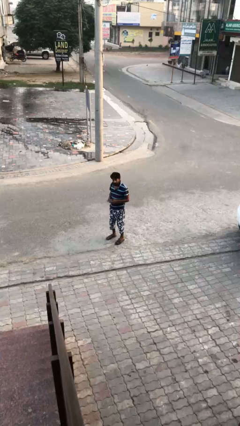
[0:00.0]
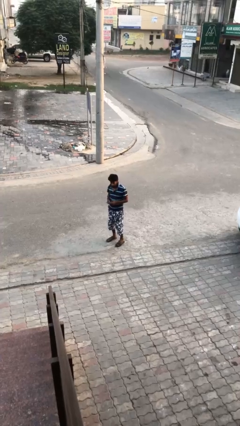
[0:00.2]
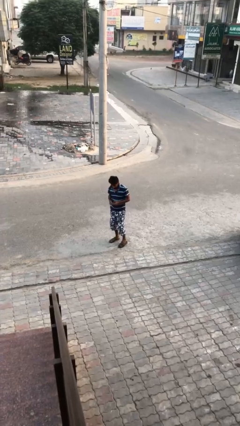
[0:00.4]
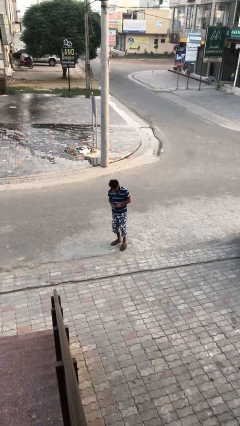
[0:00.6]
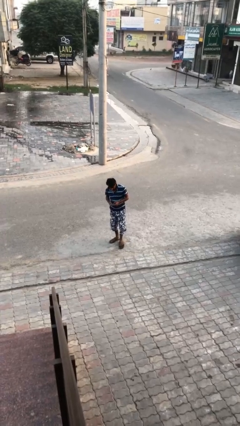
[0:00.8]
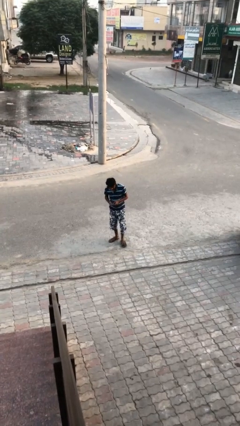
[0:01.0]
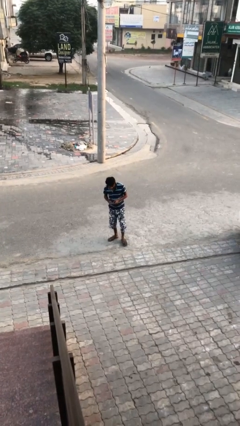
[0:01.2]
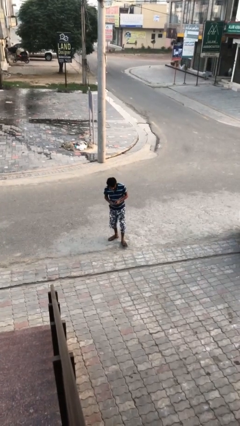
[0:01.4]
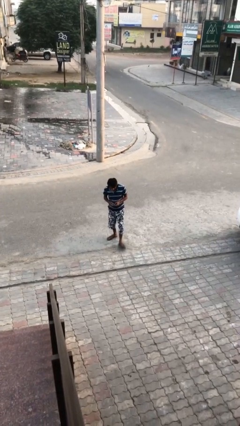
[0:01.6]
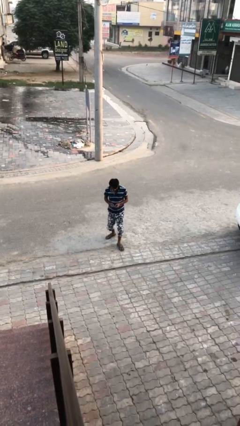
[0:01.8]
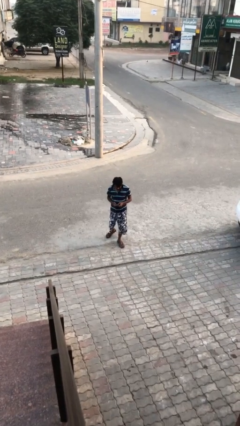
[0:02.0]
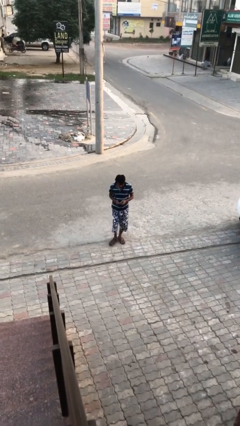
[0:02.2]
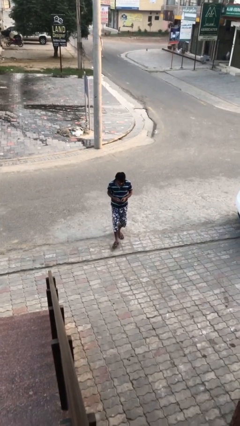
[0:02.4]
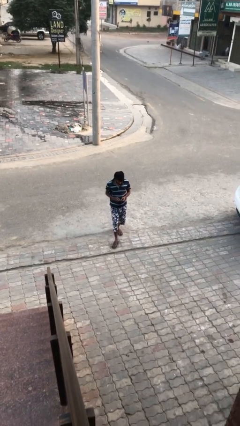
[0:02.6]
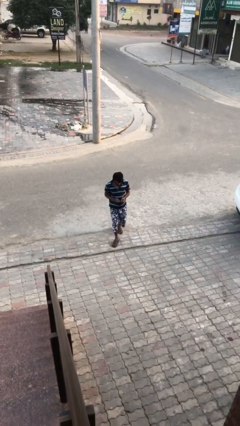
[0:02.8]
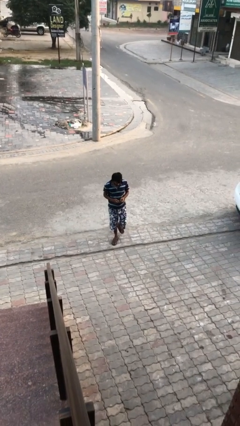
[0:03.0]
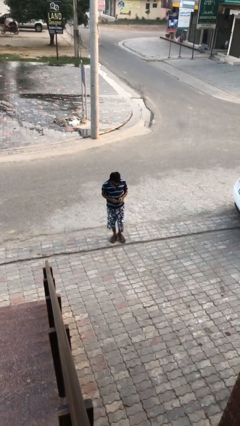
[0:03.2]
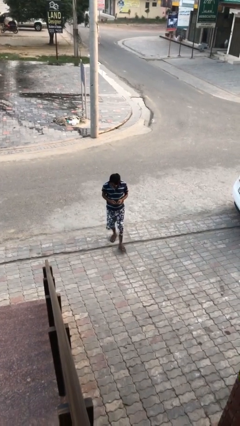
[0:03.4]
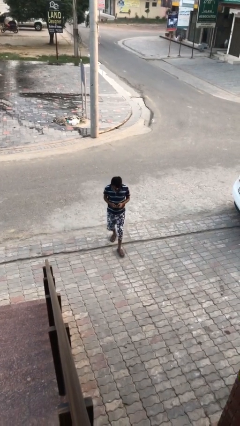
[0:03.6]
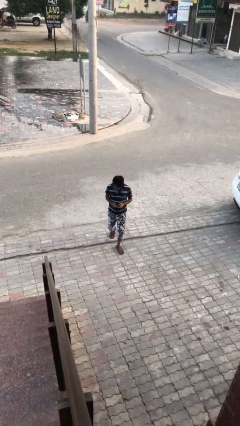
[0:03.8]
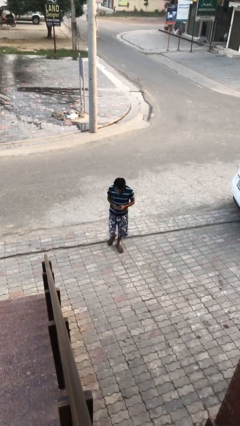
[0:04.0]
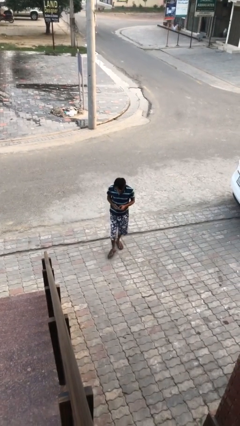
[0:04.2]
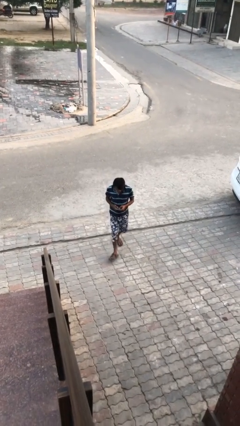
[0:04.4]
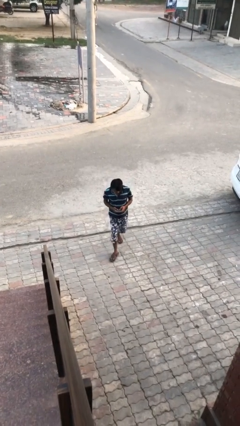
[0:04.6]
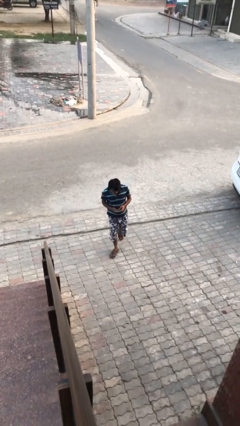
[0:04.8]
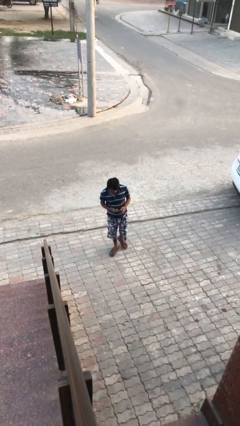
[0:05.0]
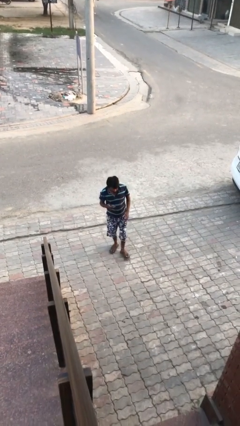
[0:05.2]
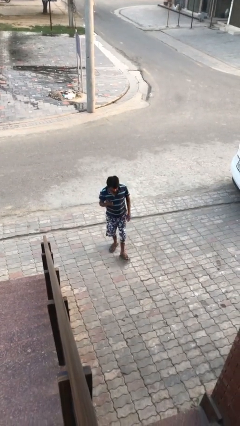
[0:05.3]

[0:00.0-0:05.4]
person texts on phone

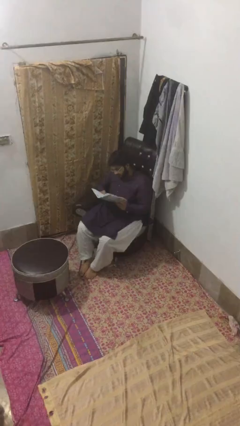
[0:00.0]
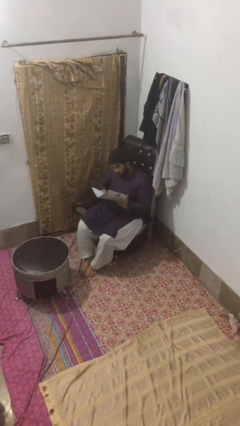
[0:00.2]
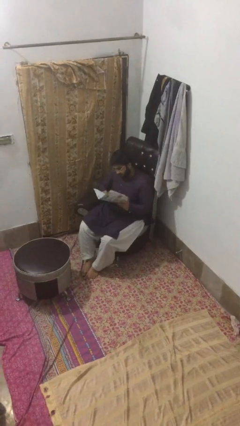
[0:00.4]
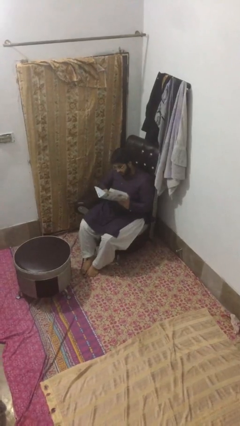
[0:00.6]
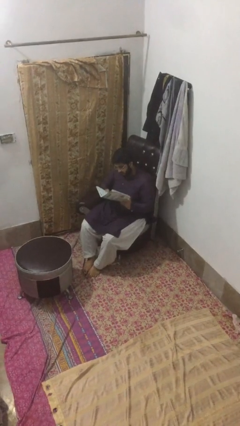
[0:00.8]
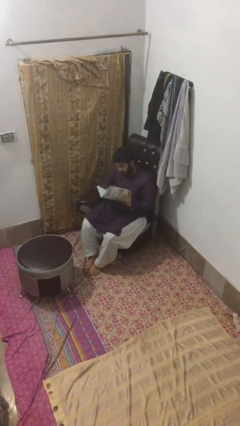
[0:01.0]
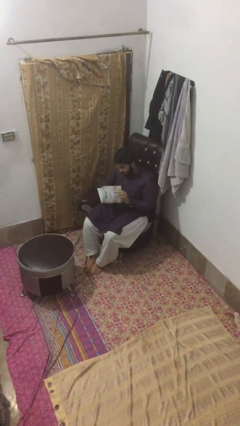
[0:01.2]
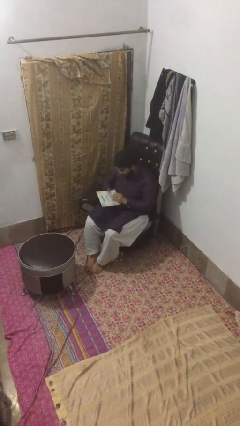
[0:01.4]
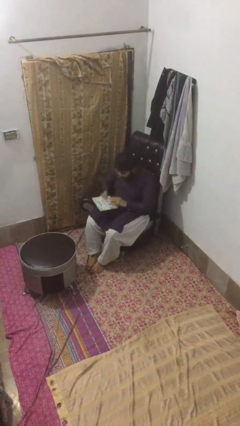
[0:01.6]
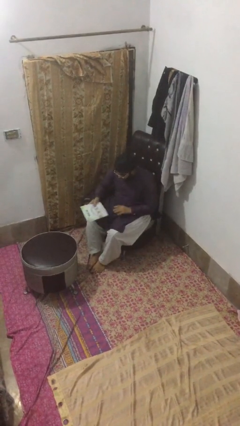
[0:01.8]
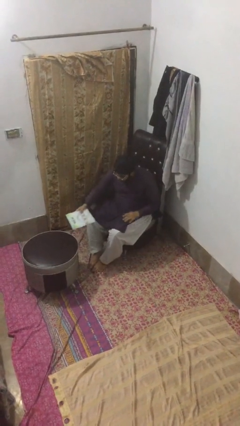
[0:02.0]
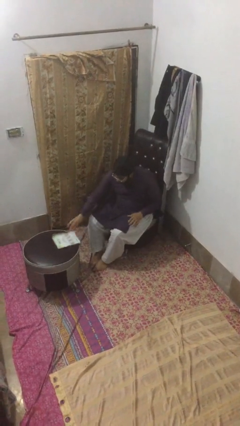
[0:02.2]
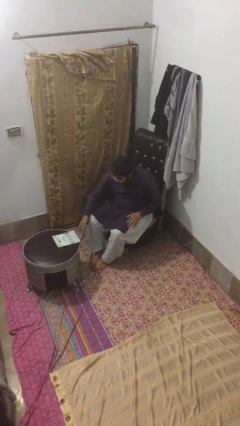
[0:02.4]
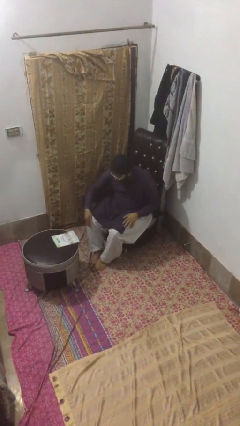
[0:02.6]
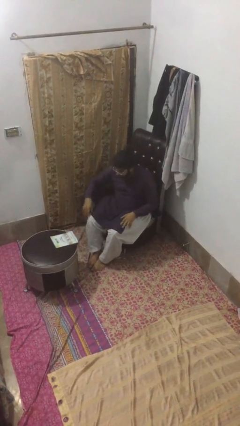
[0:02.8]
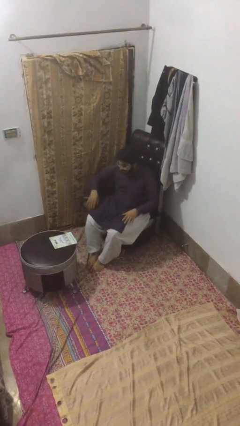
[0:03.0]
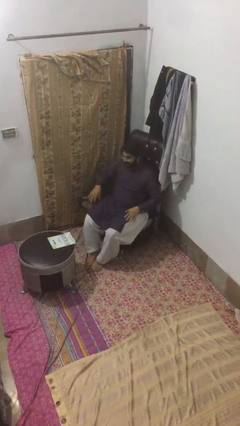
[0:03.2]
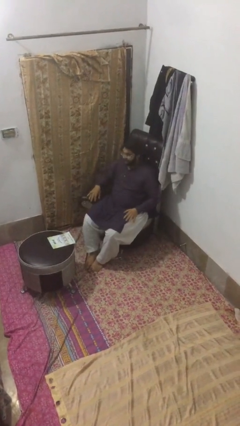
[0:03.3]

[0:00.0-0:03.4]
person puts down object on table

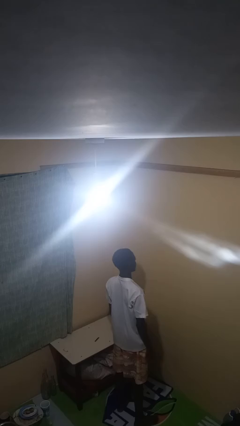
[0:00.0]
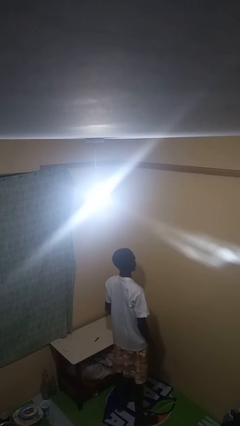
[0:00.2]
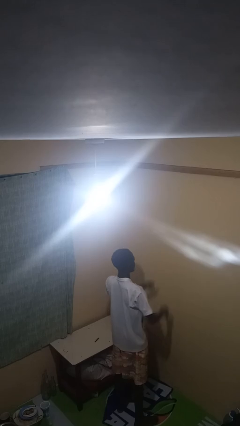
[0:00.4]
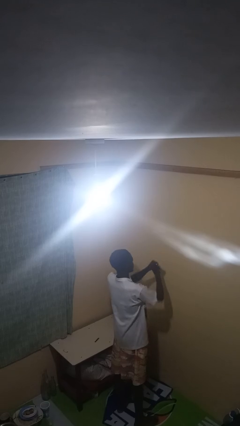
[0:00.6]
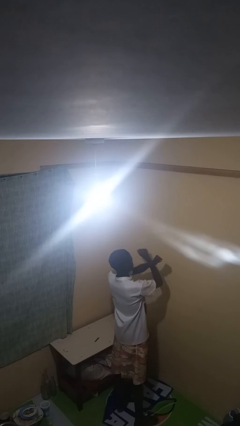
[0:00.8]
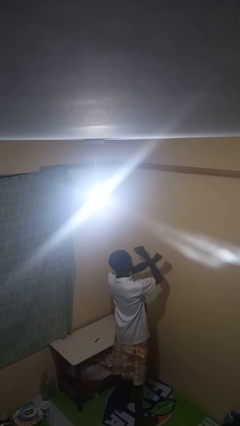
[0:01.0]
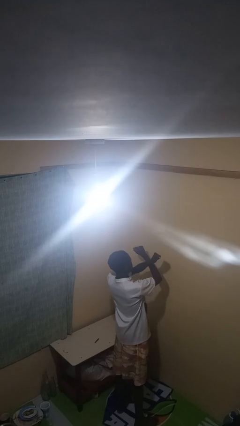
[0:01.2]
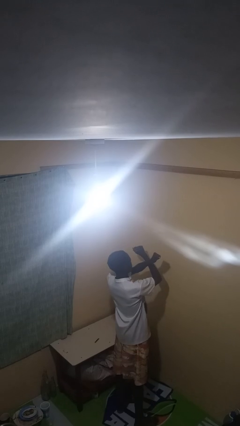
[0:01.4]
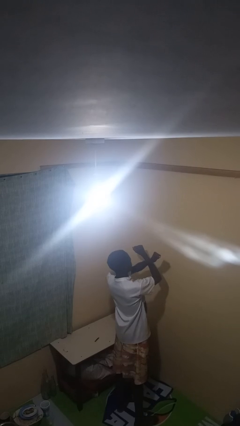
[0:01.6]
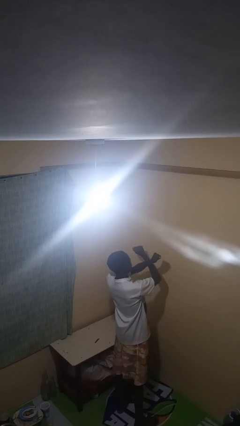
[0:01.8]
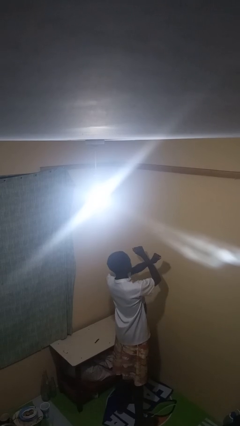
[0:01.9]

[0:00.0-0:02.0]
person gestures arms x

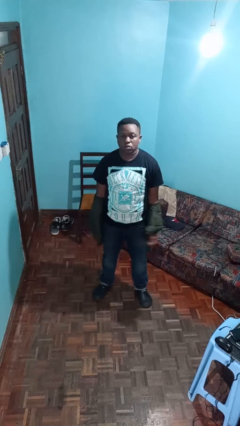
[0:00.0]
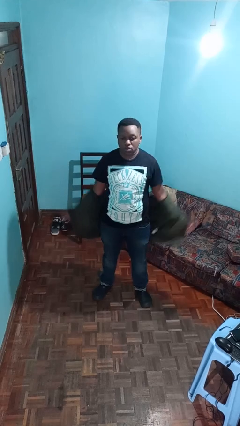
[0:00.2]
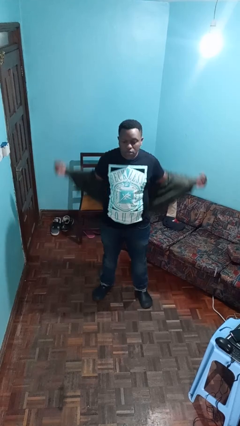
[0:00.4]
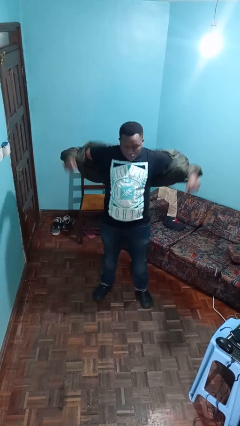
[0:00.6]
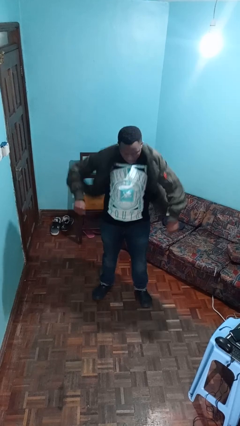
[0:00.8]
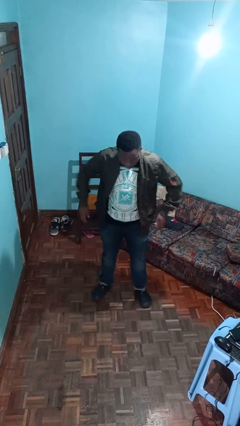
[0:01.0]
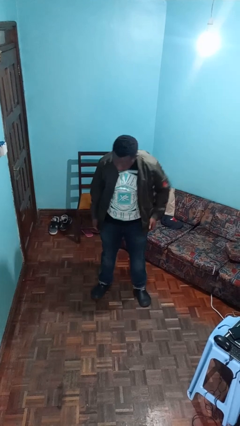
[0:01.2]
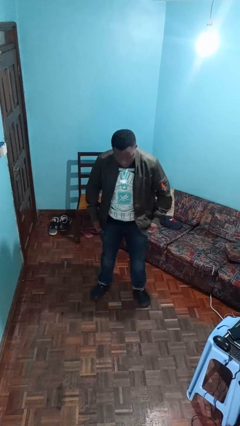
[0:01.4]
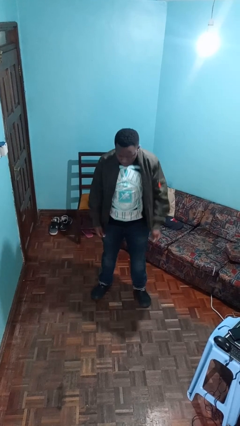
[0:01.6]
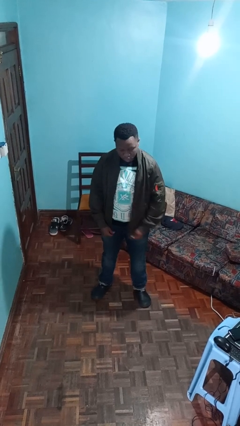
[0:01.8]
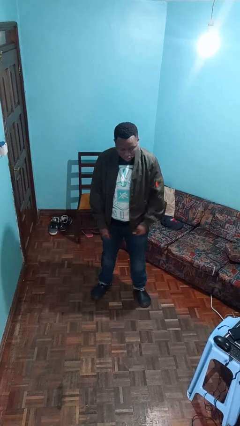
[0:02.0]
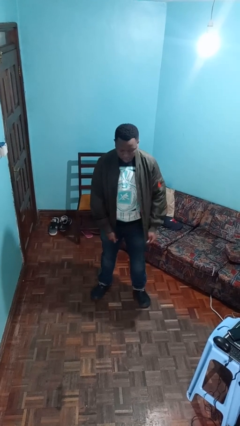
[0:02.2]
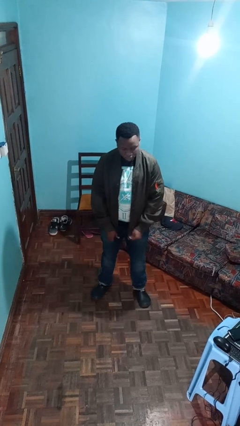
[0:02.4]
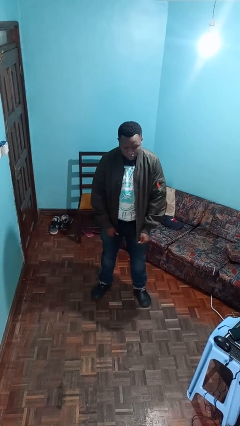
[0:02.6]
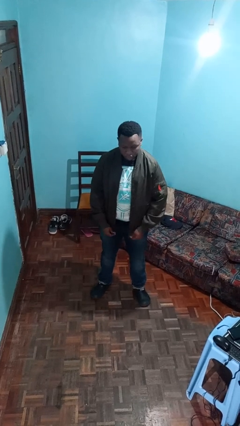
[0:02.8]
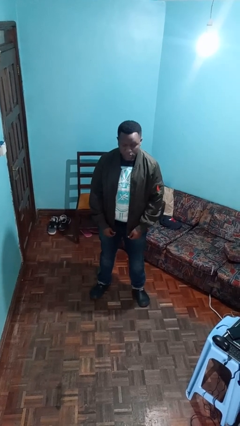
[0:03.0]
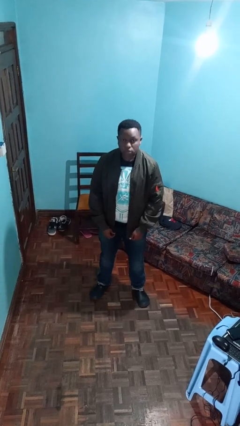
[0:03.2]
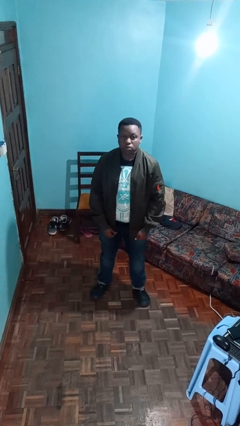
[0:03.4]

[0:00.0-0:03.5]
person puts on jacket

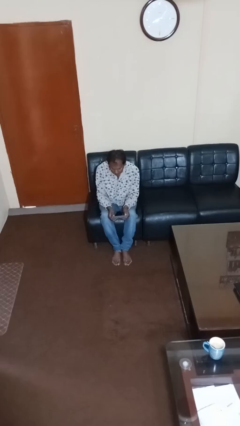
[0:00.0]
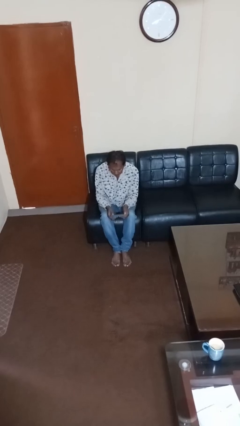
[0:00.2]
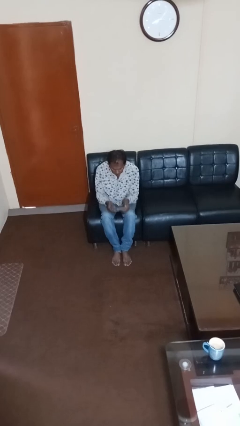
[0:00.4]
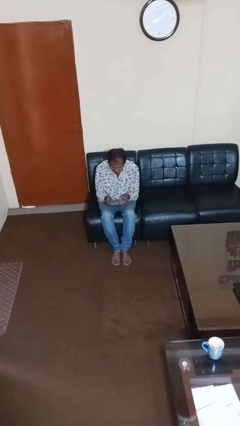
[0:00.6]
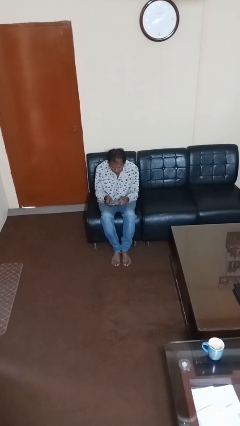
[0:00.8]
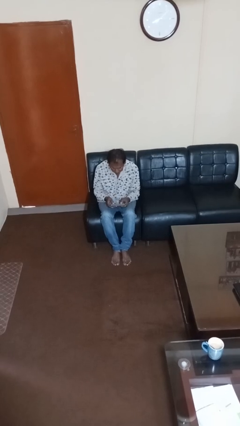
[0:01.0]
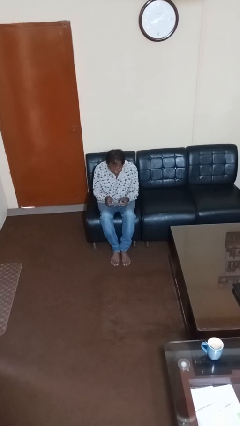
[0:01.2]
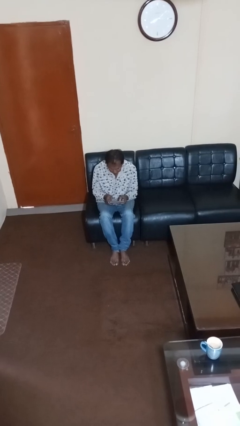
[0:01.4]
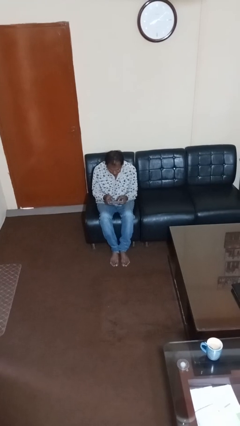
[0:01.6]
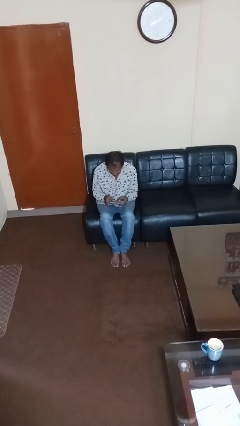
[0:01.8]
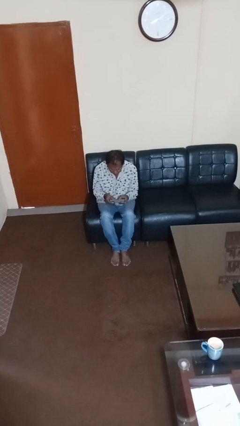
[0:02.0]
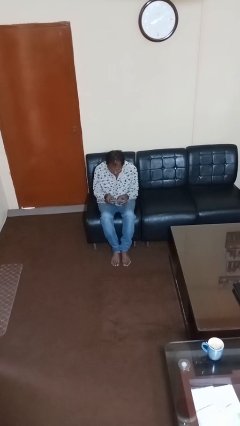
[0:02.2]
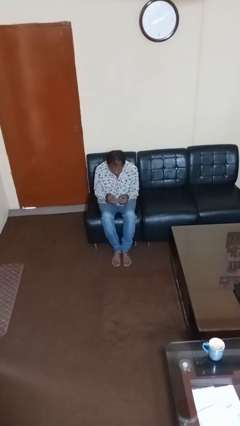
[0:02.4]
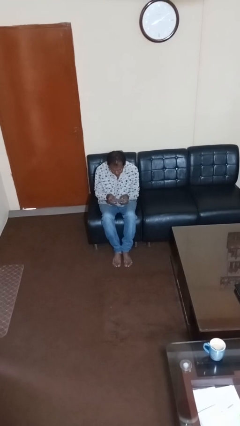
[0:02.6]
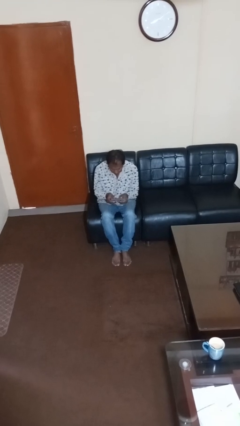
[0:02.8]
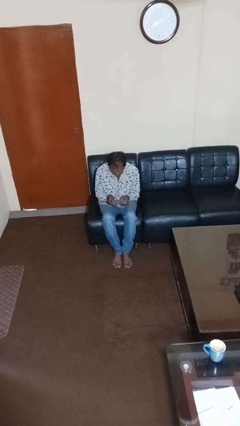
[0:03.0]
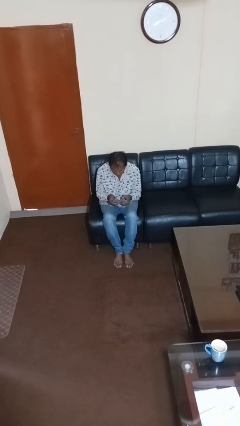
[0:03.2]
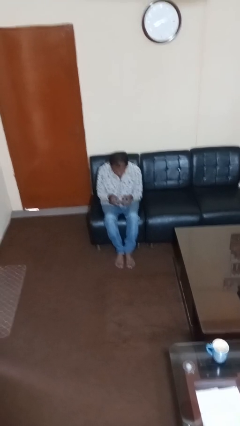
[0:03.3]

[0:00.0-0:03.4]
person interacts with tablet

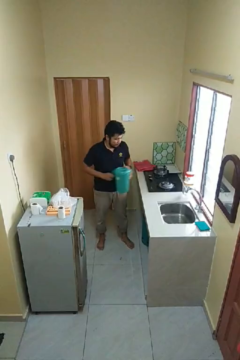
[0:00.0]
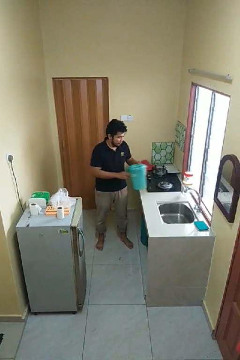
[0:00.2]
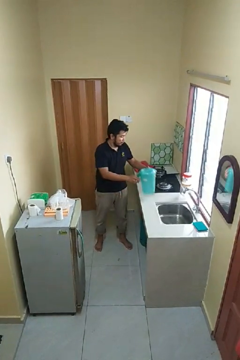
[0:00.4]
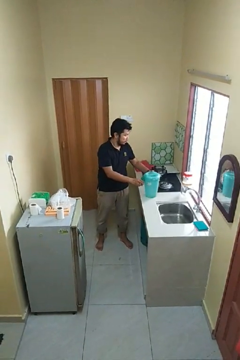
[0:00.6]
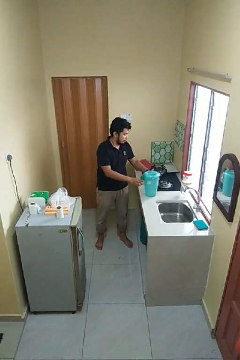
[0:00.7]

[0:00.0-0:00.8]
person puts down object on countertop
